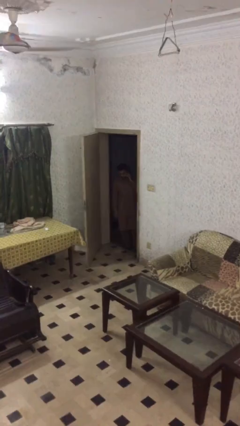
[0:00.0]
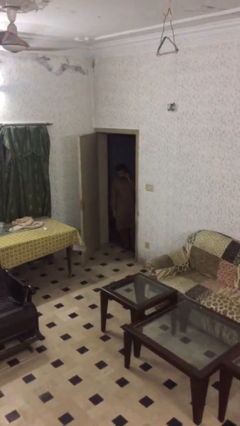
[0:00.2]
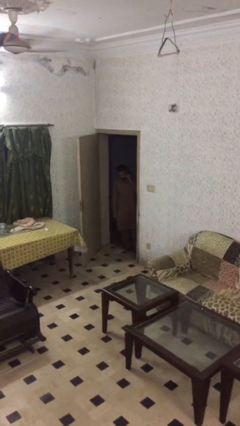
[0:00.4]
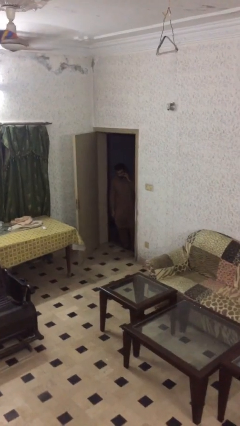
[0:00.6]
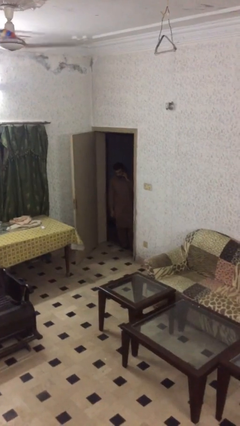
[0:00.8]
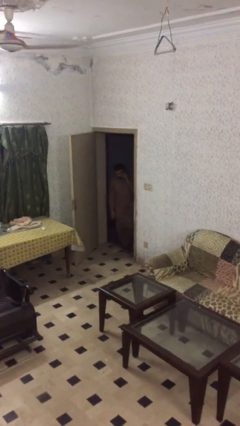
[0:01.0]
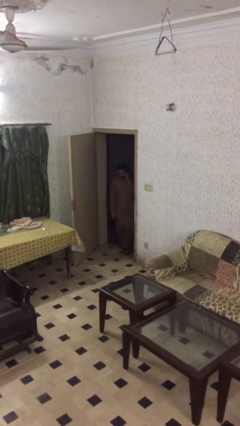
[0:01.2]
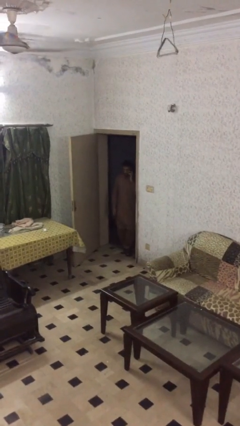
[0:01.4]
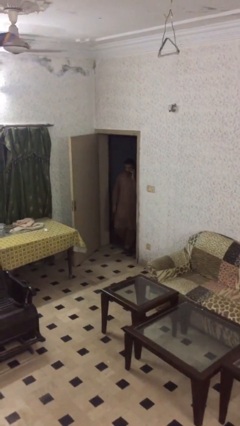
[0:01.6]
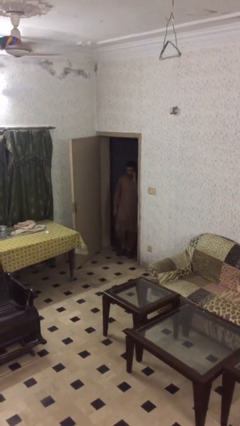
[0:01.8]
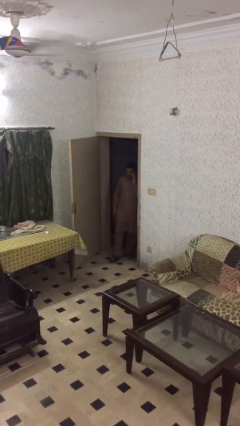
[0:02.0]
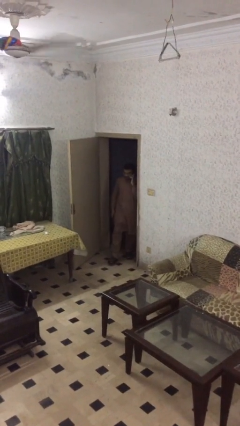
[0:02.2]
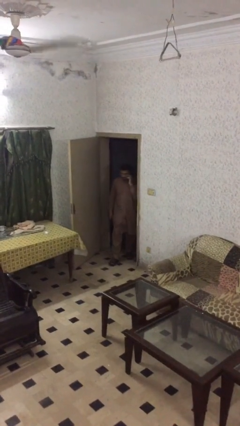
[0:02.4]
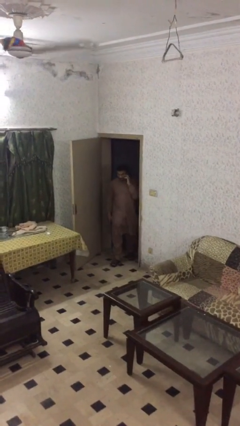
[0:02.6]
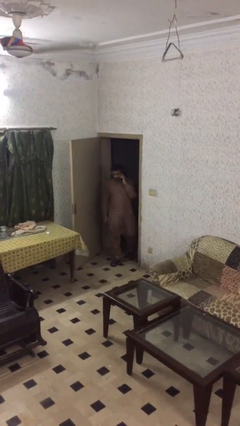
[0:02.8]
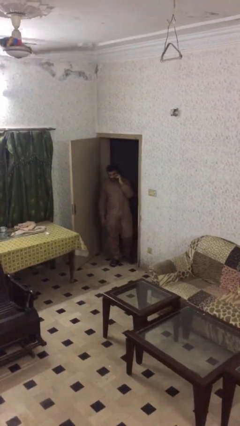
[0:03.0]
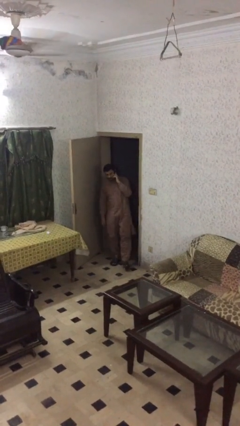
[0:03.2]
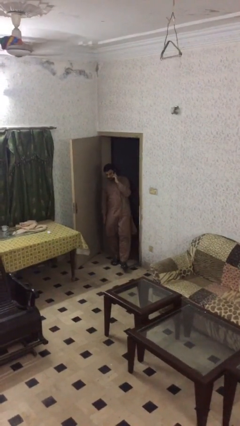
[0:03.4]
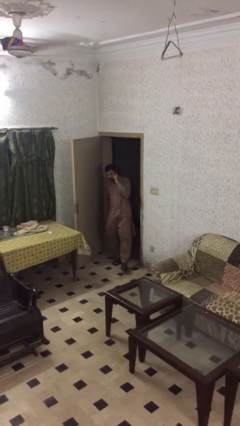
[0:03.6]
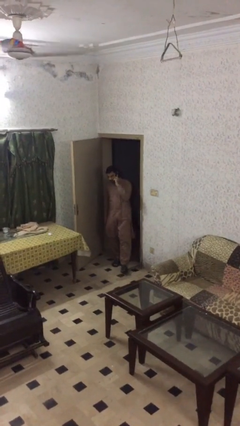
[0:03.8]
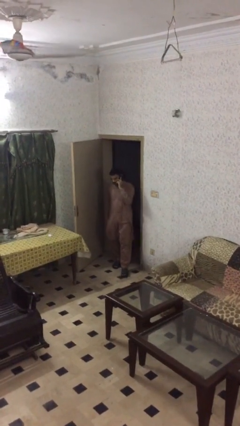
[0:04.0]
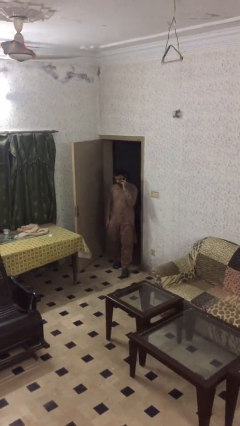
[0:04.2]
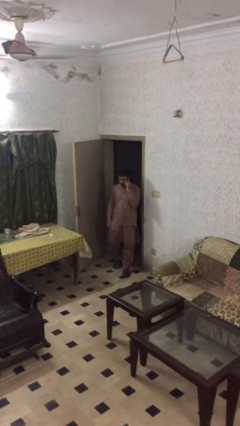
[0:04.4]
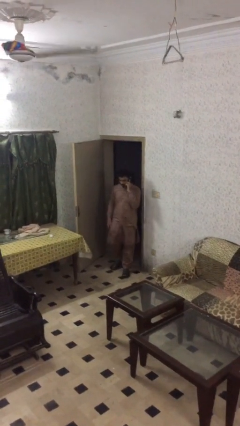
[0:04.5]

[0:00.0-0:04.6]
person enters scene through structure

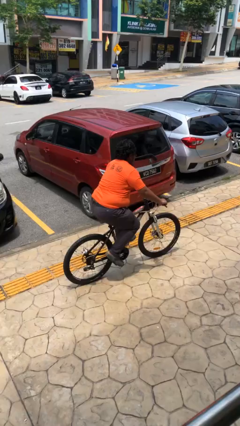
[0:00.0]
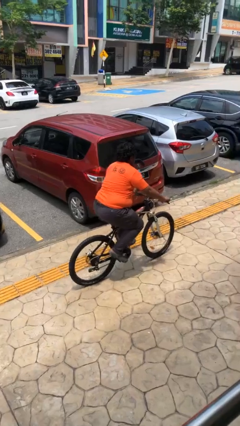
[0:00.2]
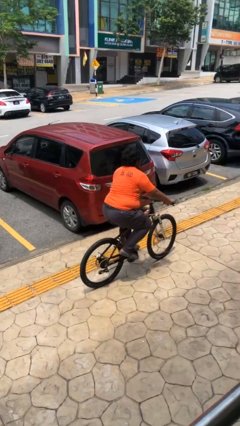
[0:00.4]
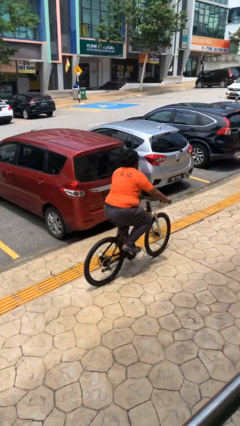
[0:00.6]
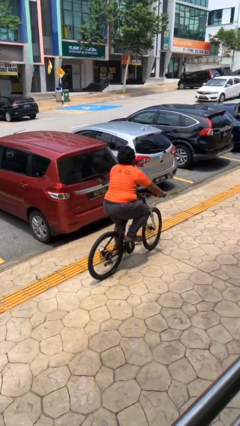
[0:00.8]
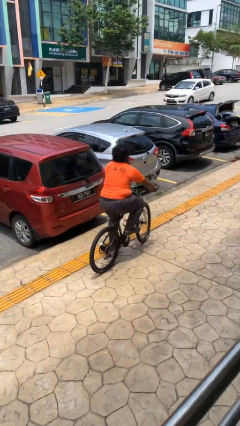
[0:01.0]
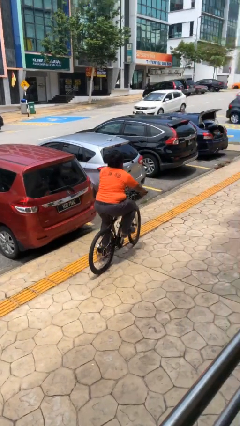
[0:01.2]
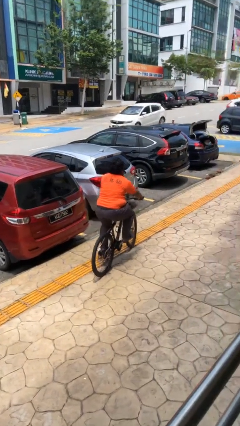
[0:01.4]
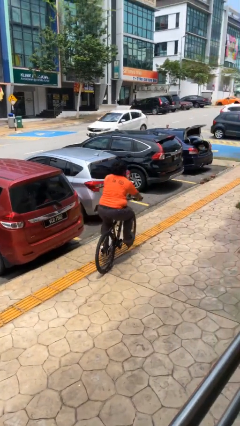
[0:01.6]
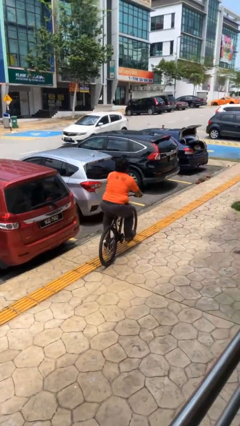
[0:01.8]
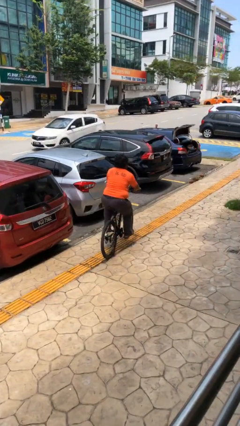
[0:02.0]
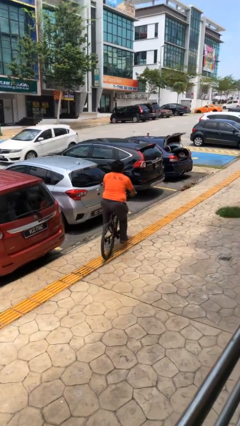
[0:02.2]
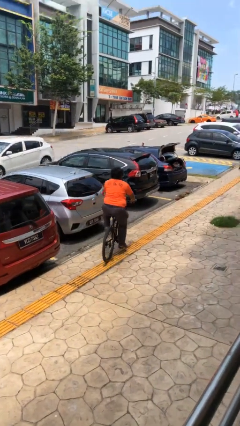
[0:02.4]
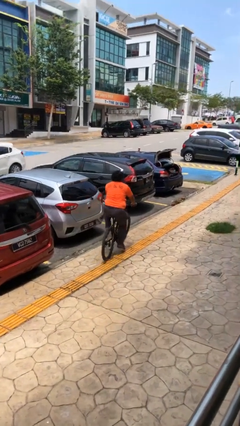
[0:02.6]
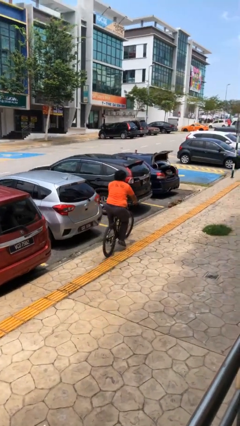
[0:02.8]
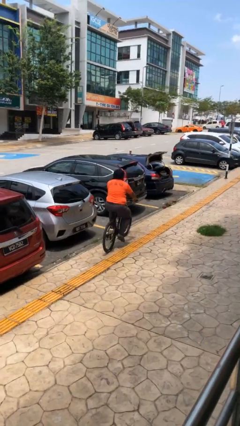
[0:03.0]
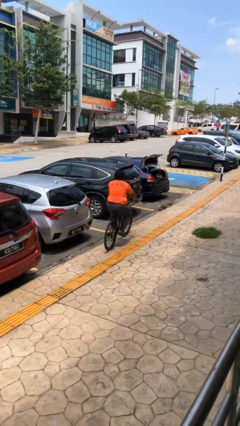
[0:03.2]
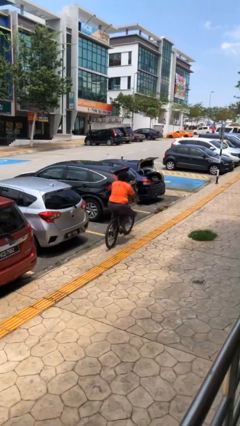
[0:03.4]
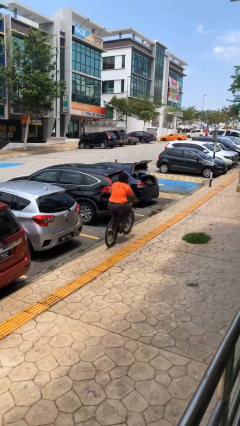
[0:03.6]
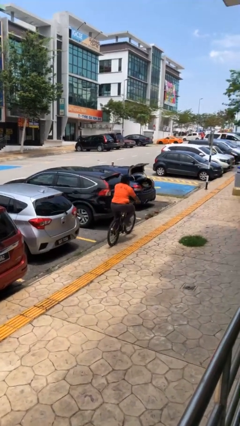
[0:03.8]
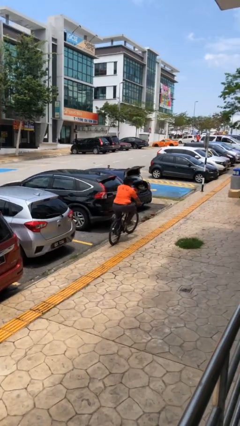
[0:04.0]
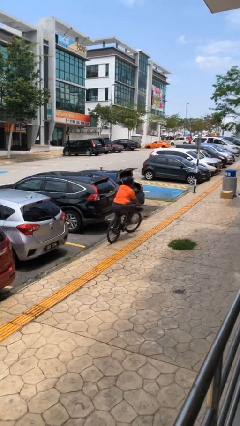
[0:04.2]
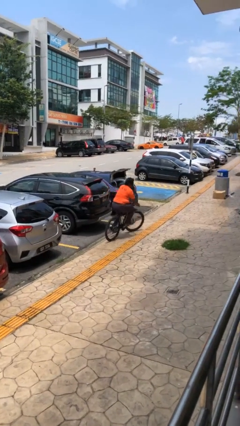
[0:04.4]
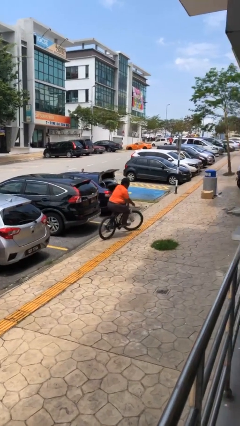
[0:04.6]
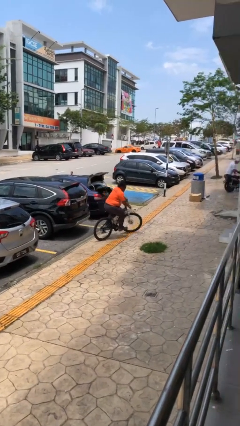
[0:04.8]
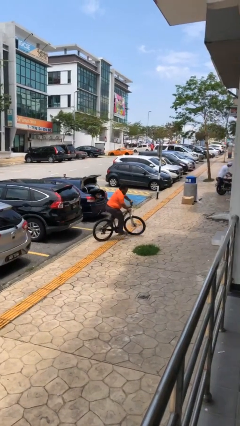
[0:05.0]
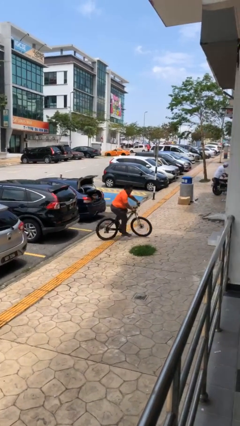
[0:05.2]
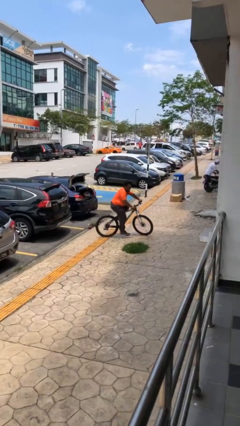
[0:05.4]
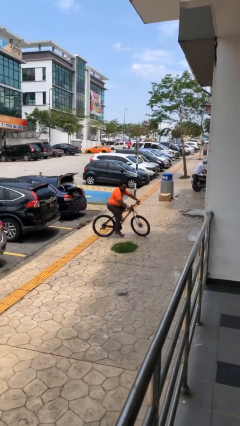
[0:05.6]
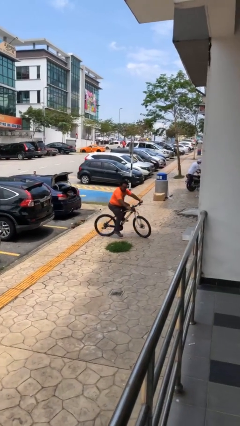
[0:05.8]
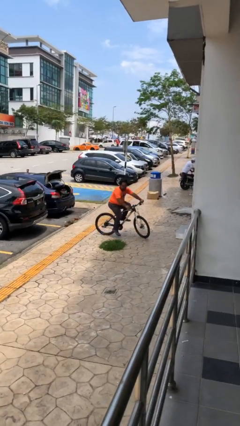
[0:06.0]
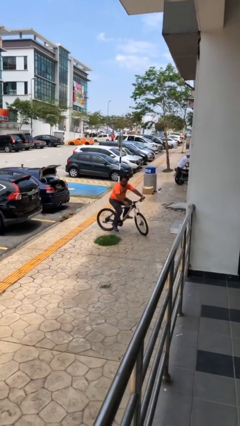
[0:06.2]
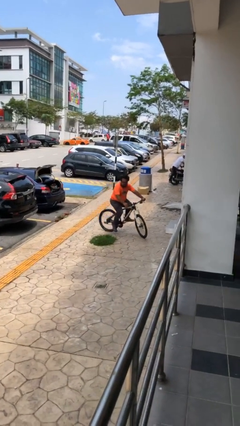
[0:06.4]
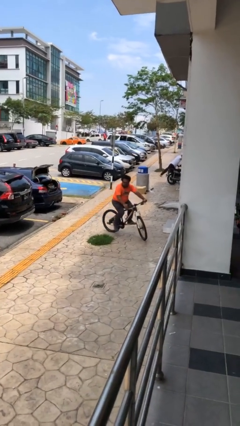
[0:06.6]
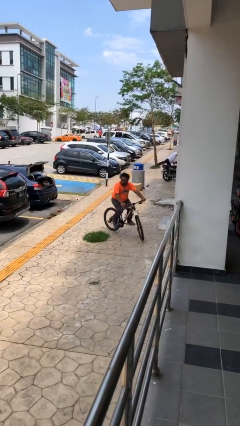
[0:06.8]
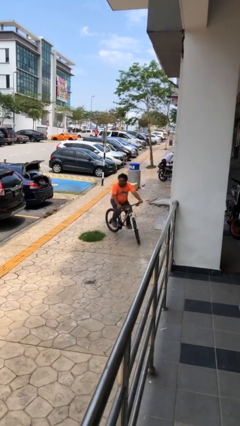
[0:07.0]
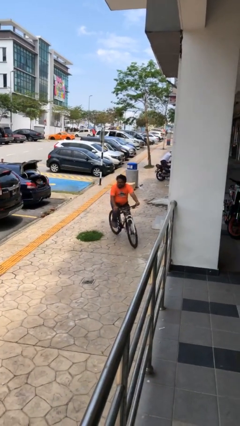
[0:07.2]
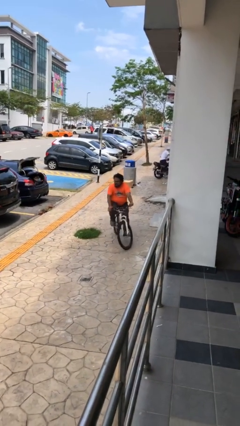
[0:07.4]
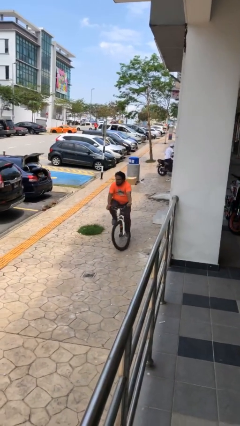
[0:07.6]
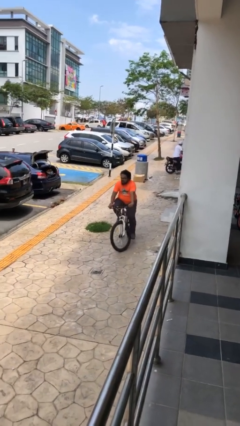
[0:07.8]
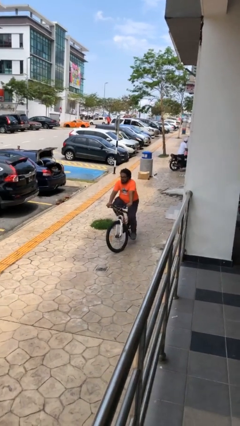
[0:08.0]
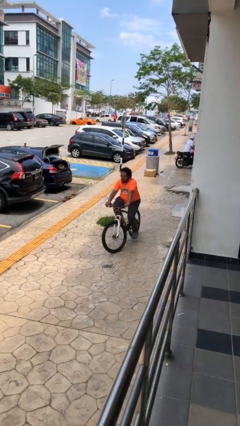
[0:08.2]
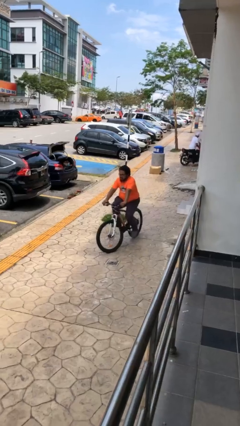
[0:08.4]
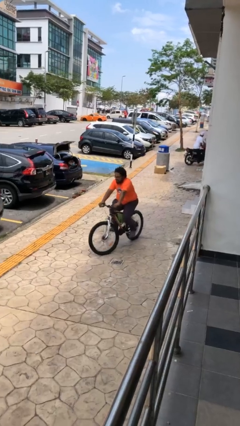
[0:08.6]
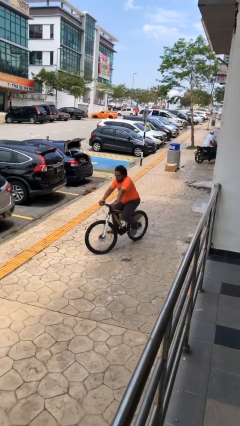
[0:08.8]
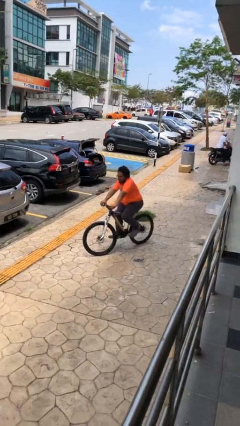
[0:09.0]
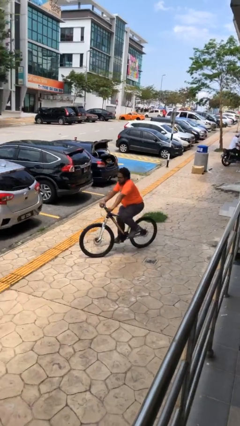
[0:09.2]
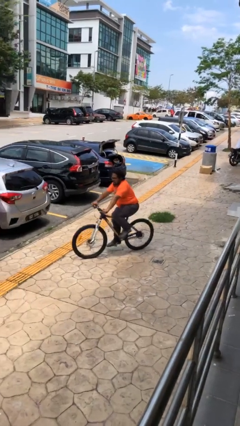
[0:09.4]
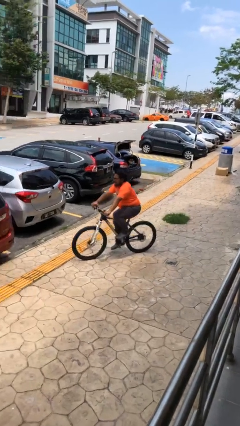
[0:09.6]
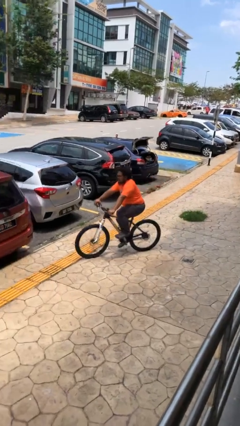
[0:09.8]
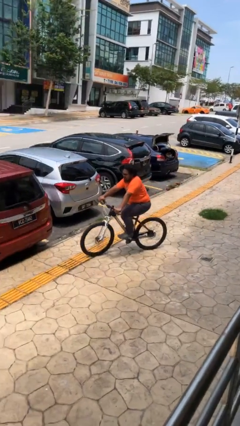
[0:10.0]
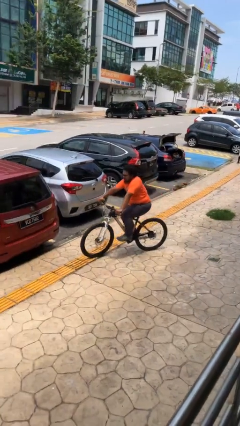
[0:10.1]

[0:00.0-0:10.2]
person rides bicycle

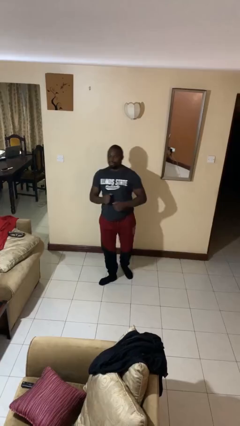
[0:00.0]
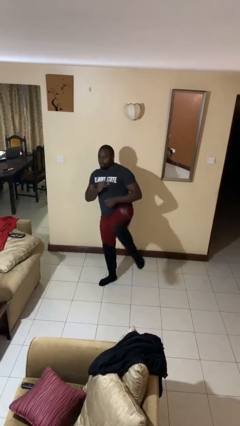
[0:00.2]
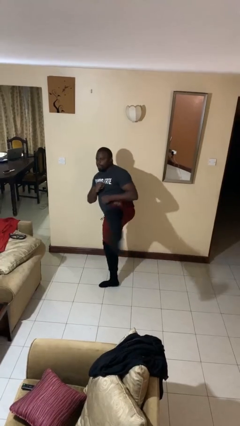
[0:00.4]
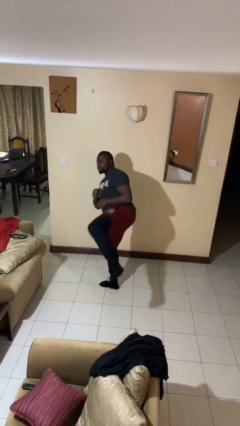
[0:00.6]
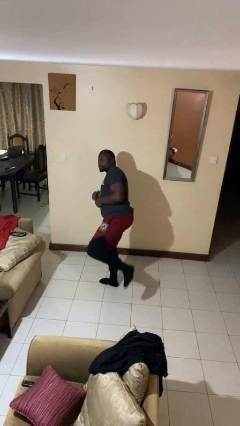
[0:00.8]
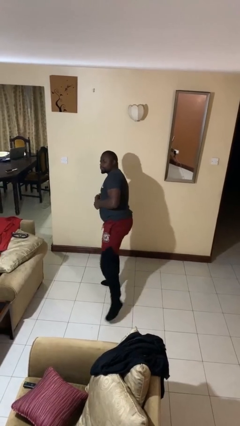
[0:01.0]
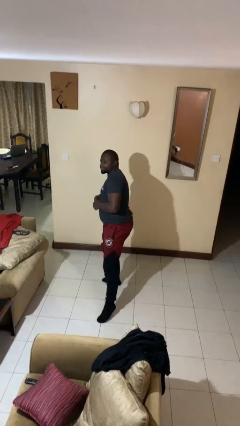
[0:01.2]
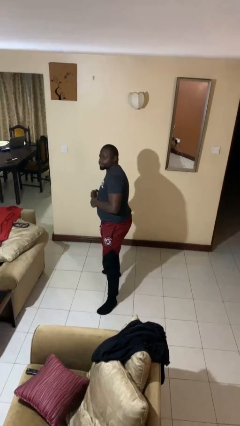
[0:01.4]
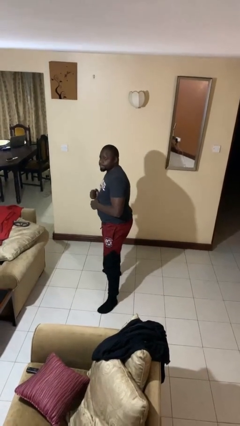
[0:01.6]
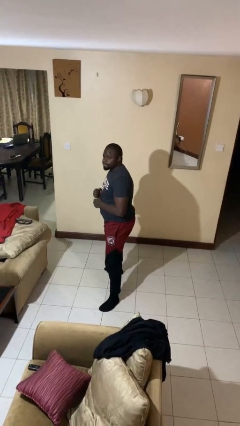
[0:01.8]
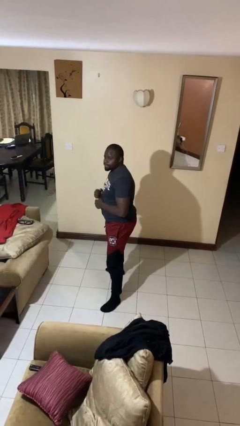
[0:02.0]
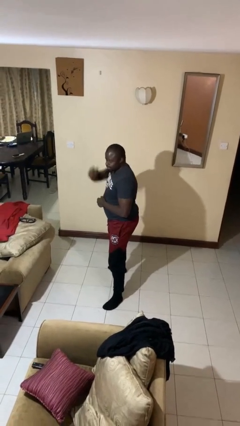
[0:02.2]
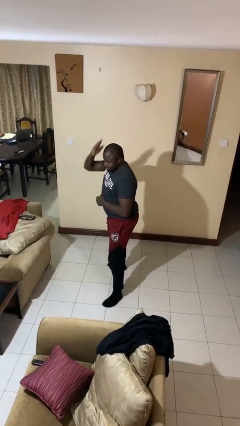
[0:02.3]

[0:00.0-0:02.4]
person karate kicks

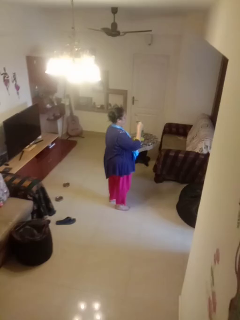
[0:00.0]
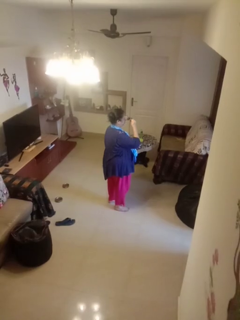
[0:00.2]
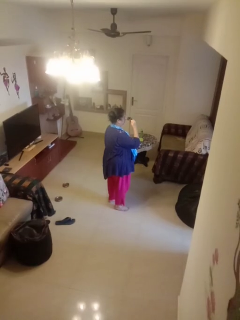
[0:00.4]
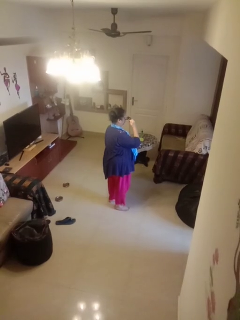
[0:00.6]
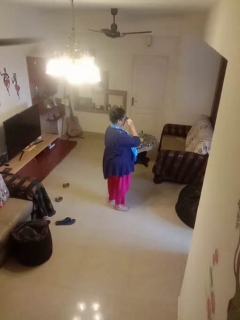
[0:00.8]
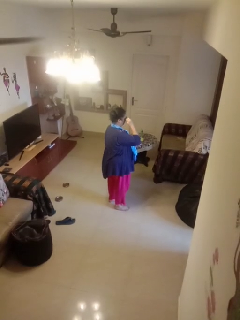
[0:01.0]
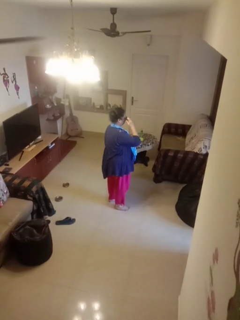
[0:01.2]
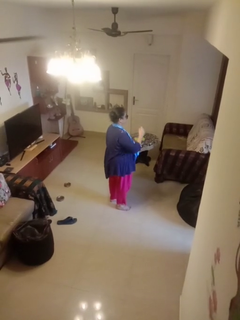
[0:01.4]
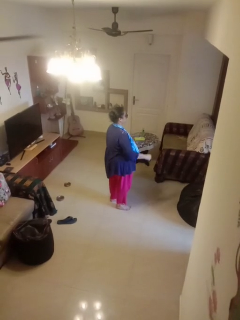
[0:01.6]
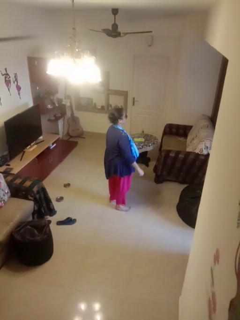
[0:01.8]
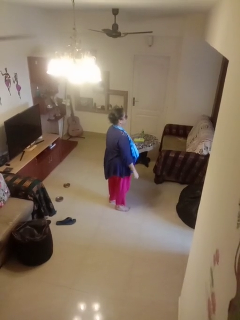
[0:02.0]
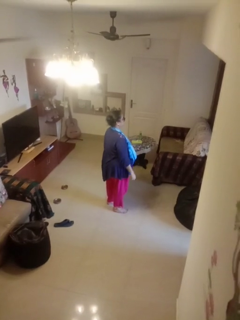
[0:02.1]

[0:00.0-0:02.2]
person puts on sunglasses
